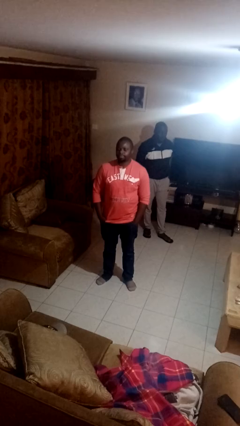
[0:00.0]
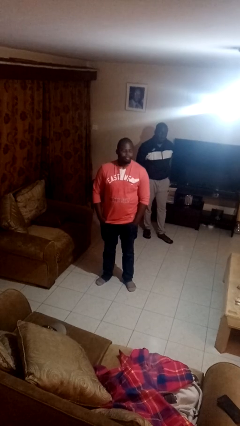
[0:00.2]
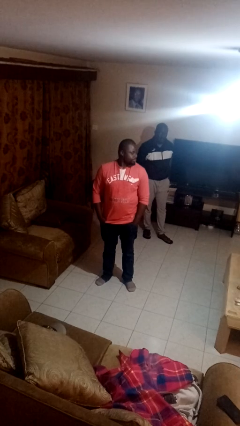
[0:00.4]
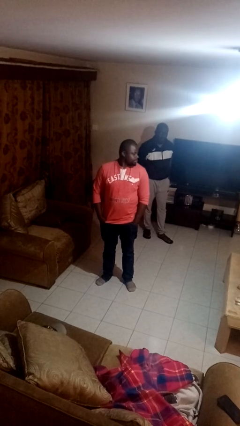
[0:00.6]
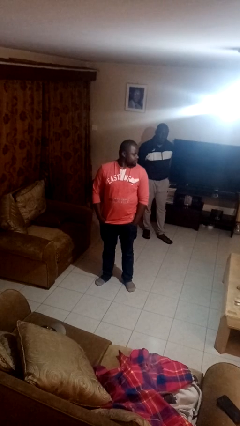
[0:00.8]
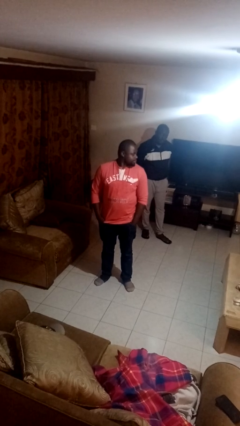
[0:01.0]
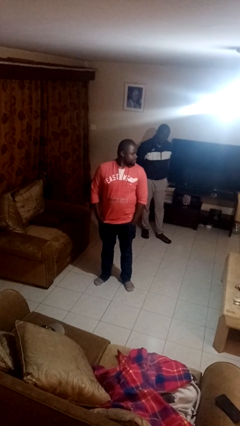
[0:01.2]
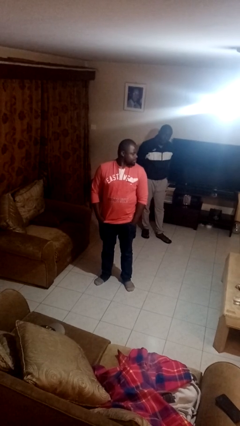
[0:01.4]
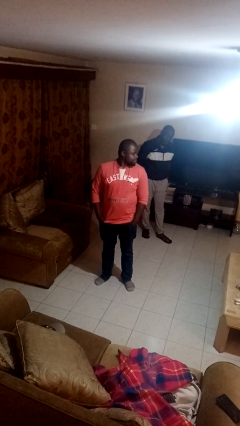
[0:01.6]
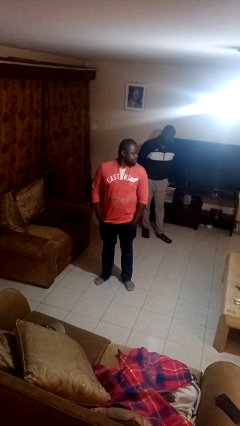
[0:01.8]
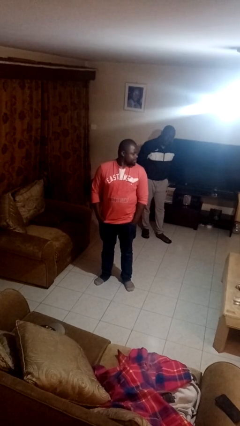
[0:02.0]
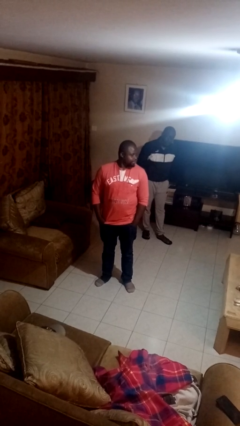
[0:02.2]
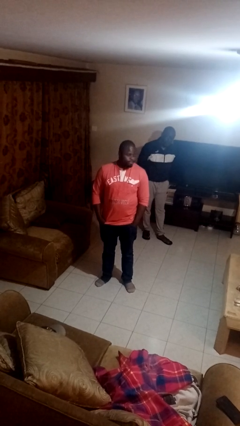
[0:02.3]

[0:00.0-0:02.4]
person looks over shoulder

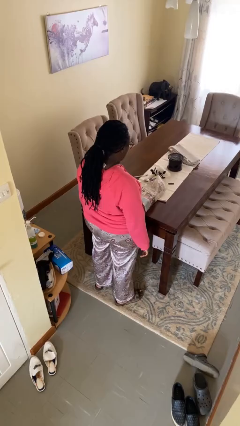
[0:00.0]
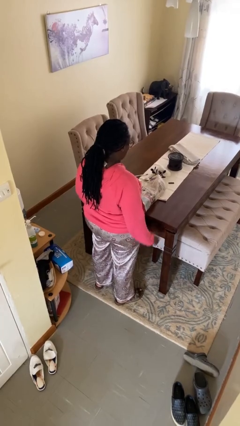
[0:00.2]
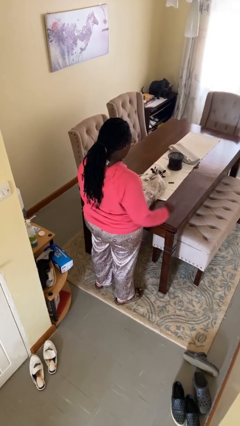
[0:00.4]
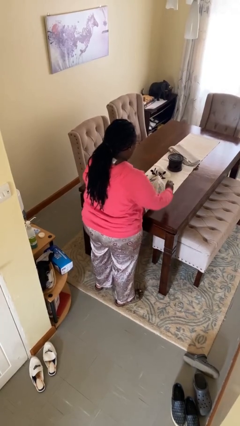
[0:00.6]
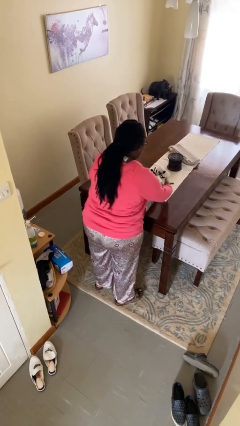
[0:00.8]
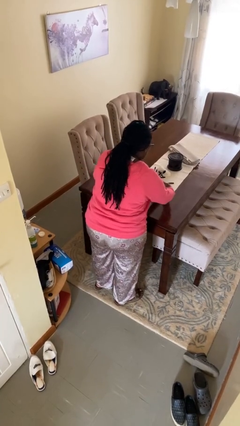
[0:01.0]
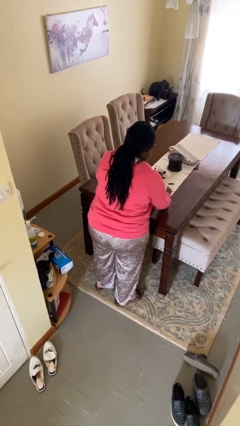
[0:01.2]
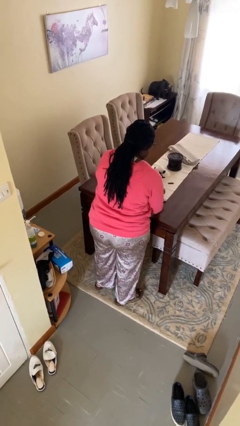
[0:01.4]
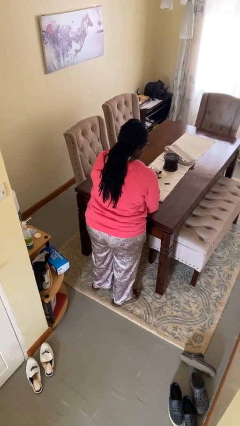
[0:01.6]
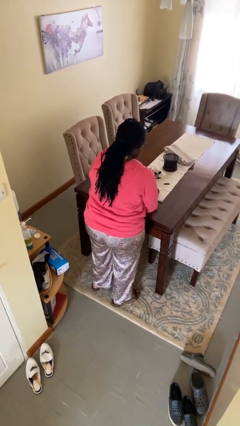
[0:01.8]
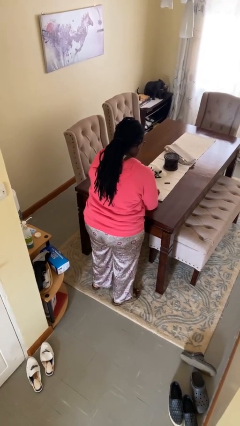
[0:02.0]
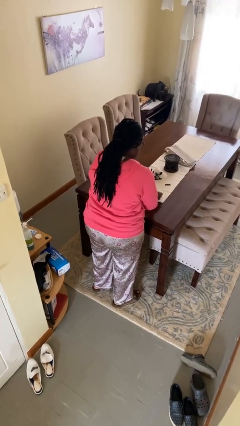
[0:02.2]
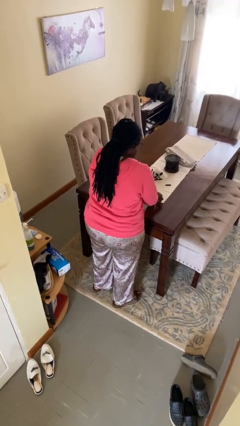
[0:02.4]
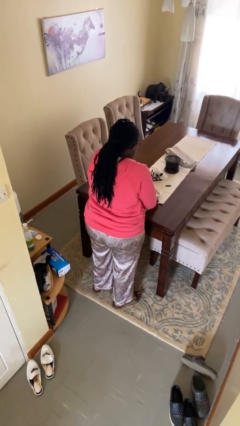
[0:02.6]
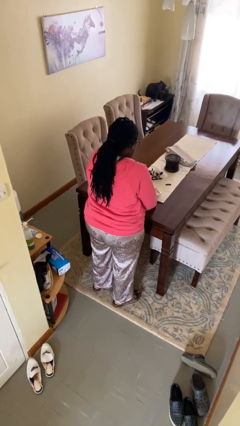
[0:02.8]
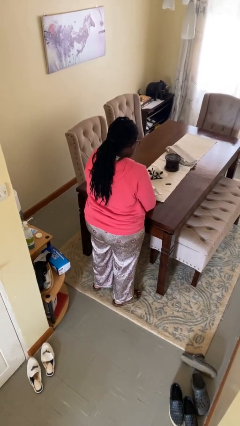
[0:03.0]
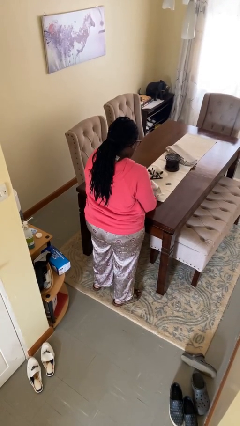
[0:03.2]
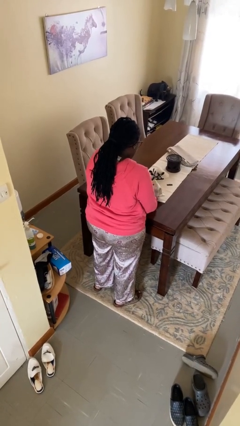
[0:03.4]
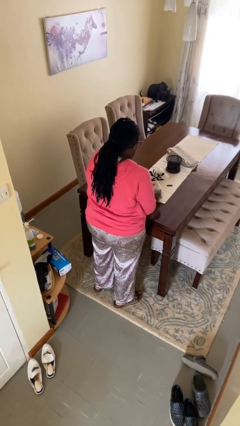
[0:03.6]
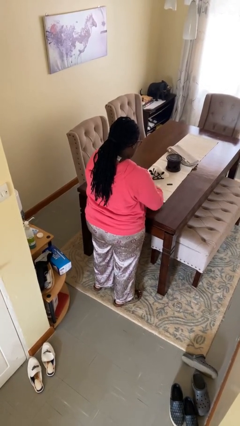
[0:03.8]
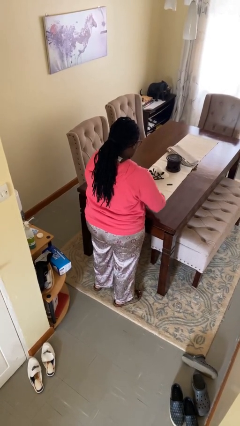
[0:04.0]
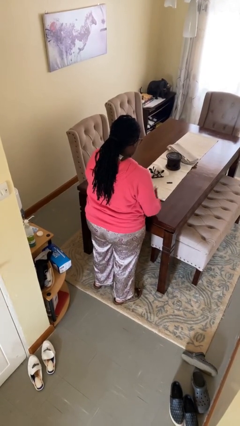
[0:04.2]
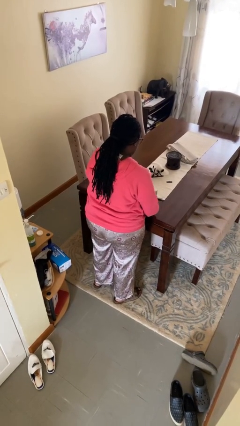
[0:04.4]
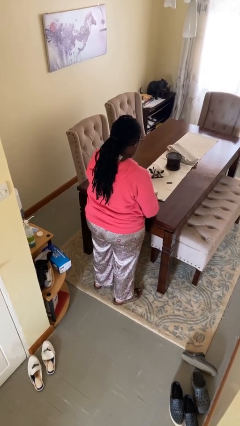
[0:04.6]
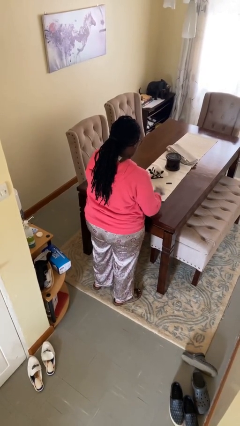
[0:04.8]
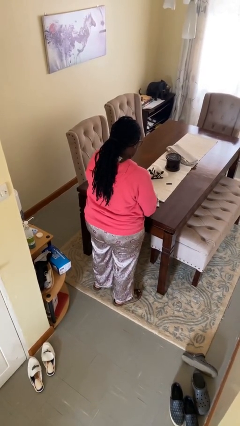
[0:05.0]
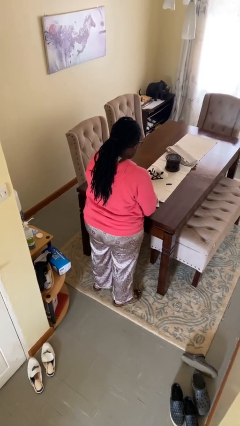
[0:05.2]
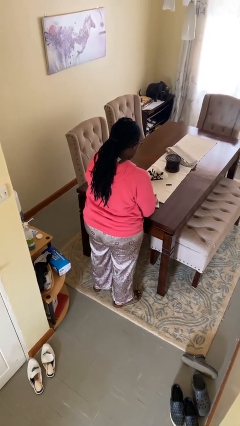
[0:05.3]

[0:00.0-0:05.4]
person wraps box

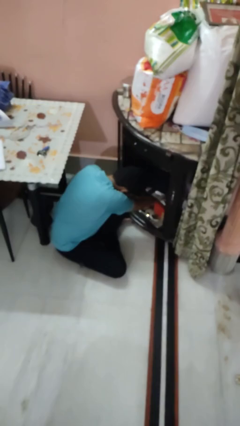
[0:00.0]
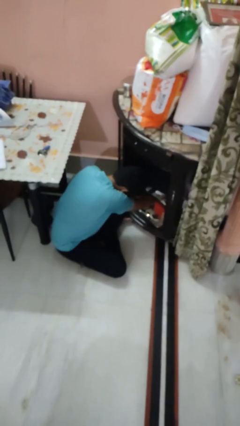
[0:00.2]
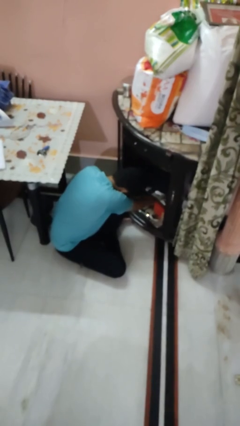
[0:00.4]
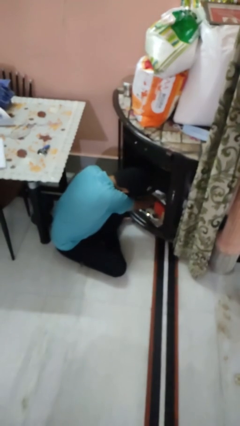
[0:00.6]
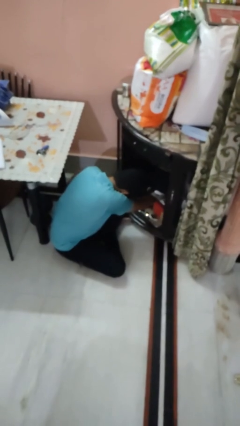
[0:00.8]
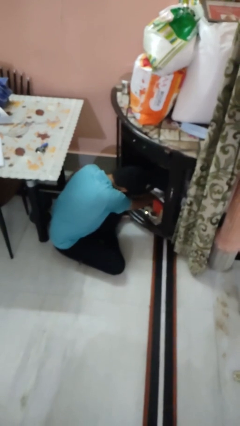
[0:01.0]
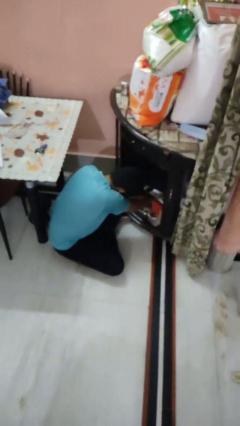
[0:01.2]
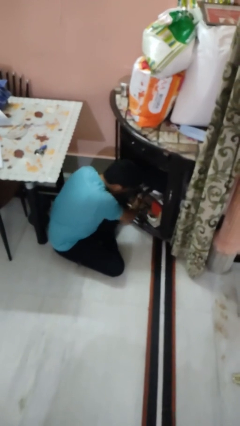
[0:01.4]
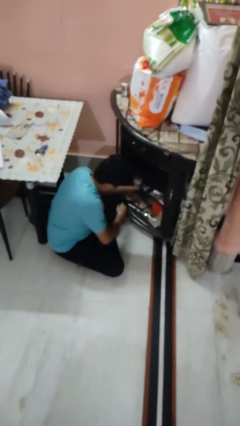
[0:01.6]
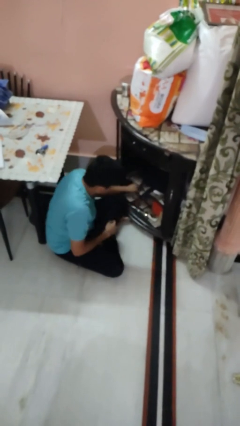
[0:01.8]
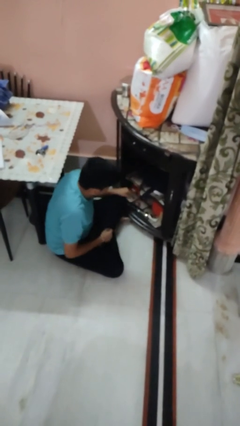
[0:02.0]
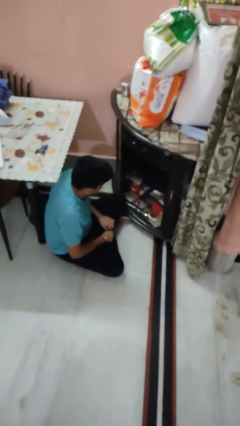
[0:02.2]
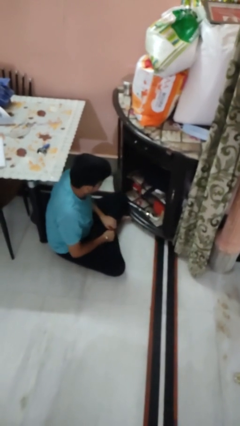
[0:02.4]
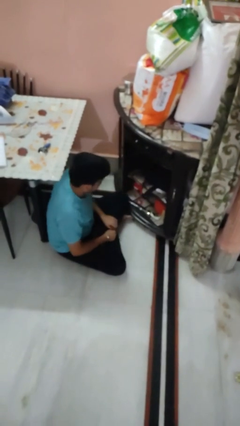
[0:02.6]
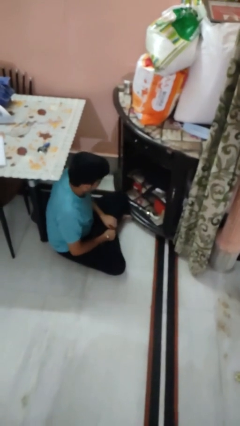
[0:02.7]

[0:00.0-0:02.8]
person searches in cabinet

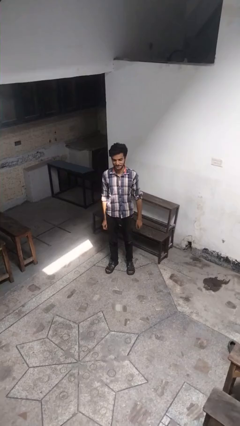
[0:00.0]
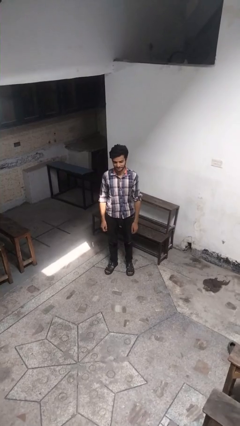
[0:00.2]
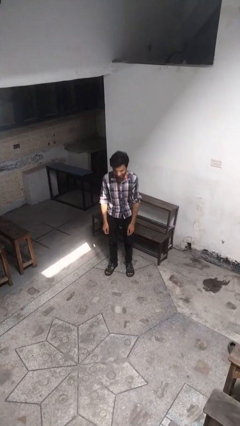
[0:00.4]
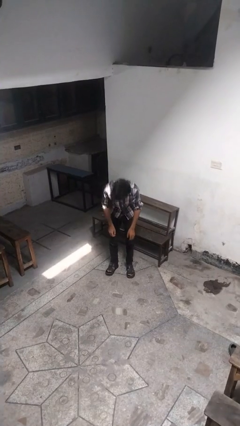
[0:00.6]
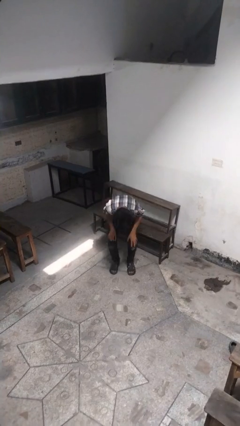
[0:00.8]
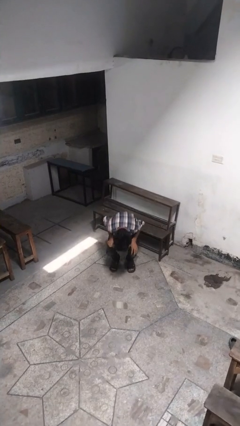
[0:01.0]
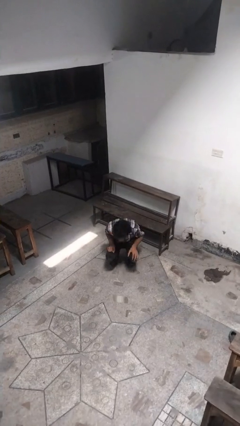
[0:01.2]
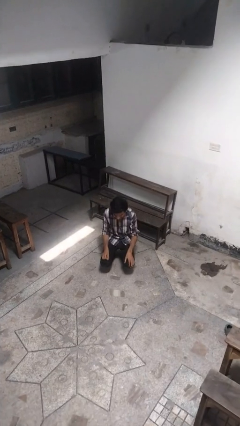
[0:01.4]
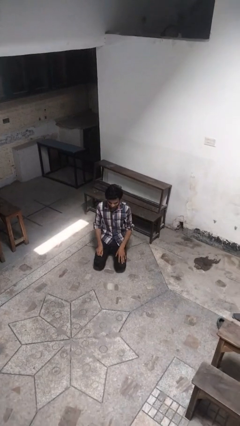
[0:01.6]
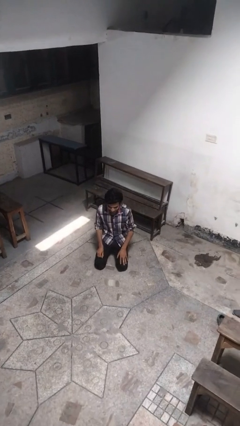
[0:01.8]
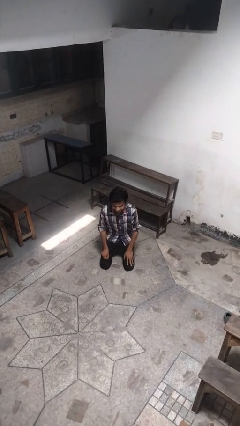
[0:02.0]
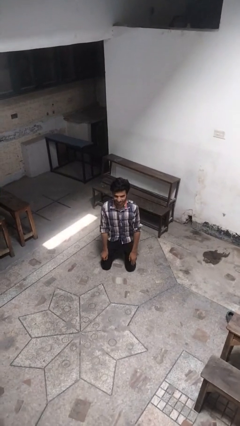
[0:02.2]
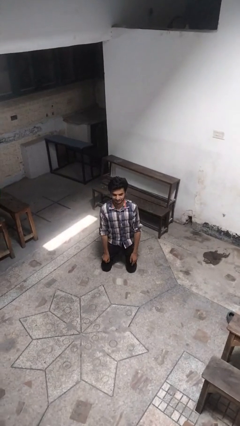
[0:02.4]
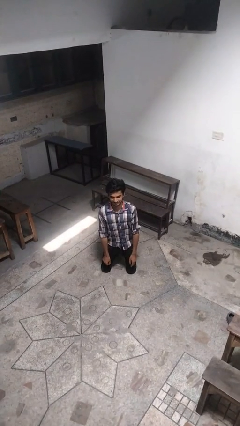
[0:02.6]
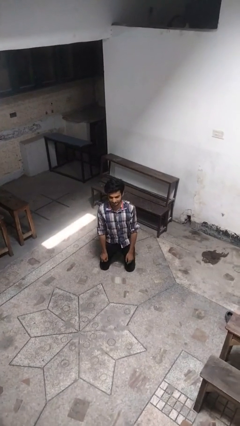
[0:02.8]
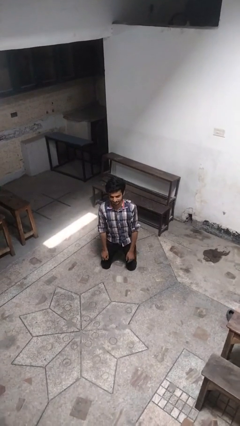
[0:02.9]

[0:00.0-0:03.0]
person kneels

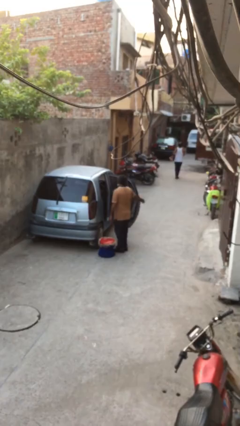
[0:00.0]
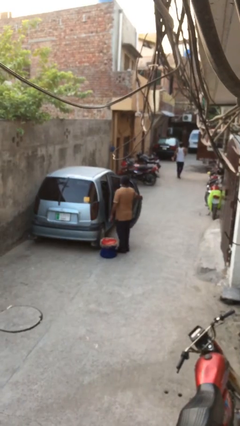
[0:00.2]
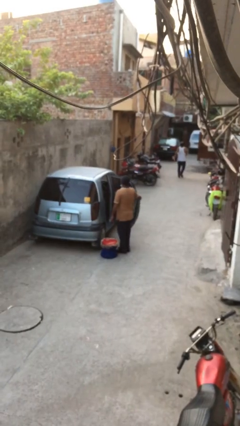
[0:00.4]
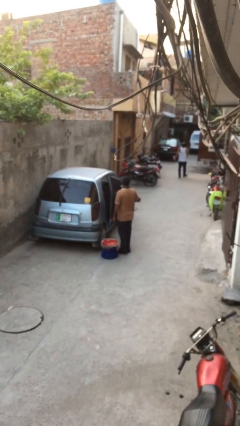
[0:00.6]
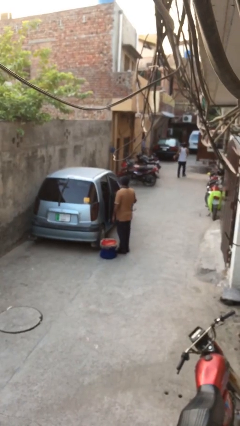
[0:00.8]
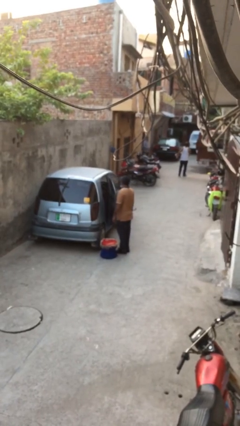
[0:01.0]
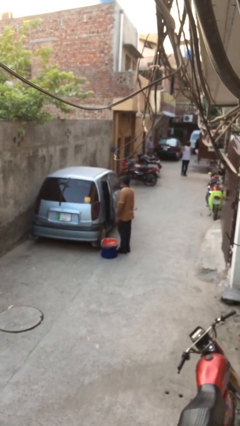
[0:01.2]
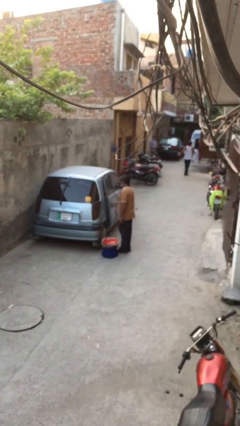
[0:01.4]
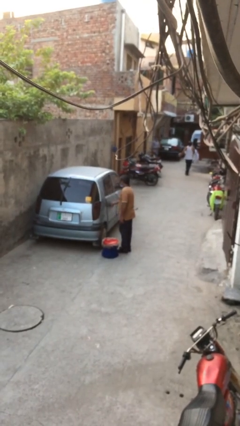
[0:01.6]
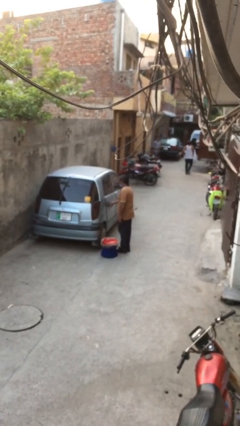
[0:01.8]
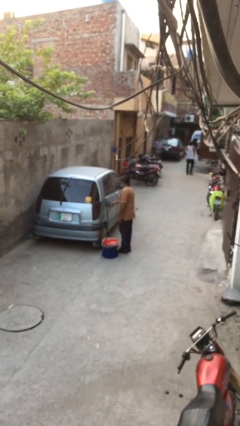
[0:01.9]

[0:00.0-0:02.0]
person closes car door

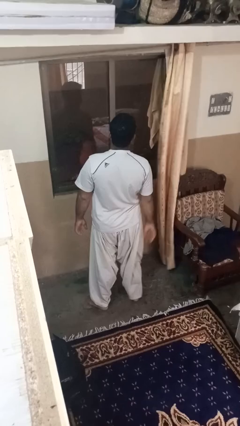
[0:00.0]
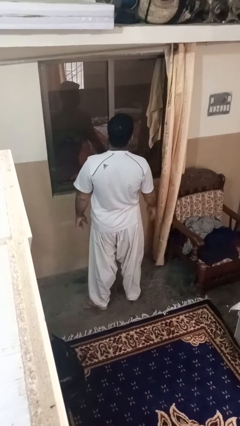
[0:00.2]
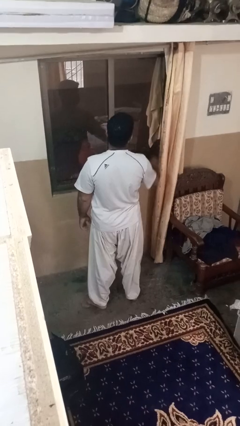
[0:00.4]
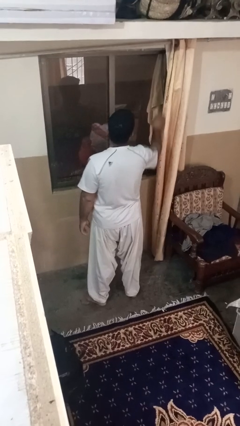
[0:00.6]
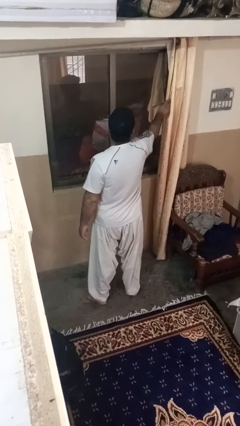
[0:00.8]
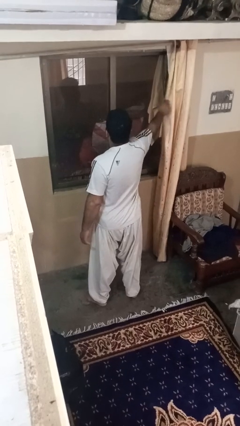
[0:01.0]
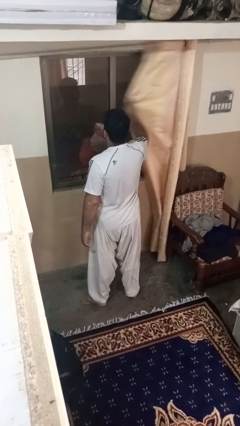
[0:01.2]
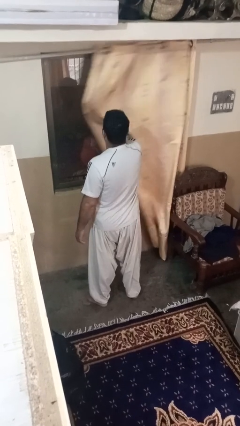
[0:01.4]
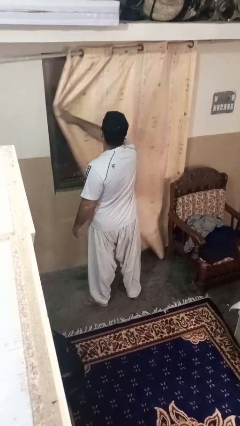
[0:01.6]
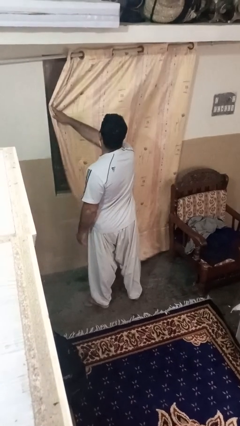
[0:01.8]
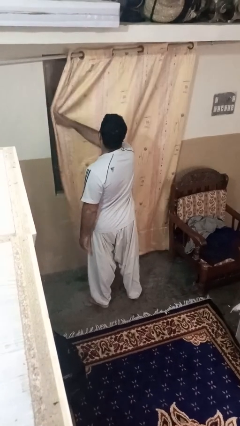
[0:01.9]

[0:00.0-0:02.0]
person closes curtains
